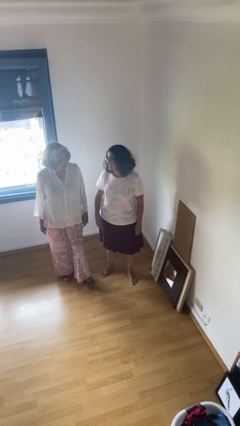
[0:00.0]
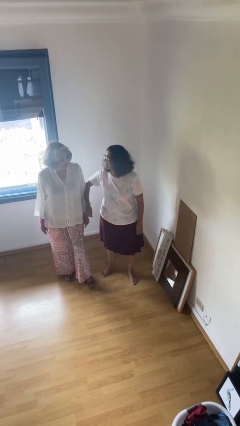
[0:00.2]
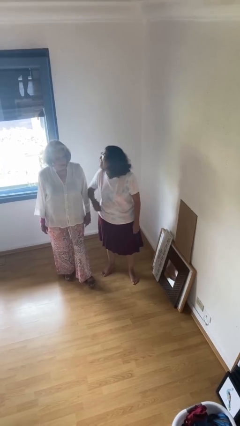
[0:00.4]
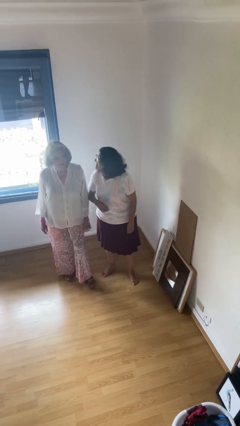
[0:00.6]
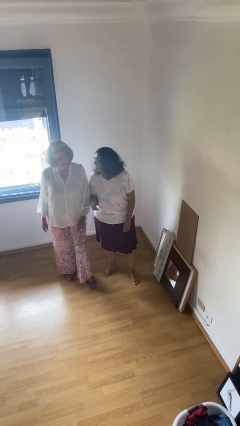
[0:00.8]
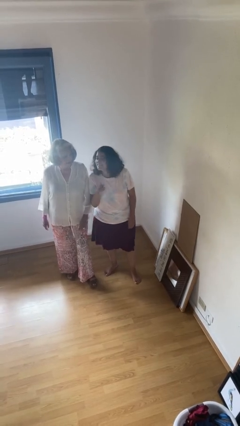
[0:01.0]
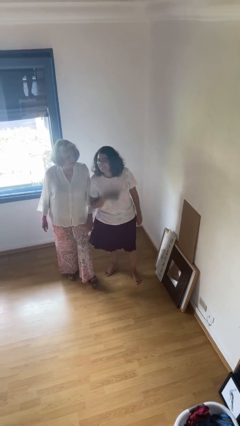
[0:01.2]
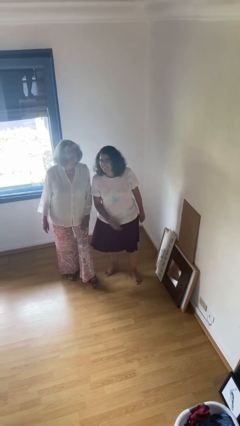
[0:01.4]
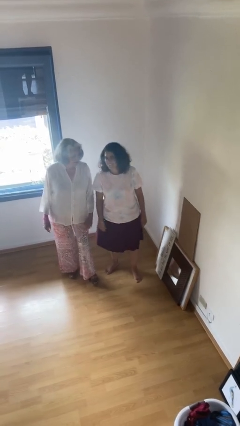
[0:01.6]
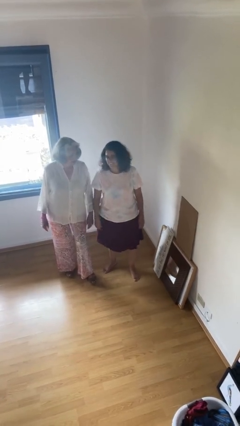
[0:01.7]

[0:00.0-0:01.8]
person nudges person with elbow

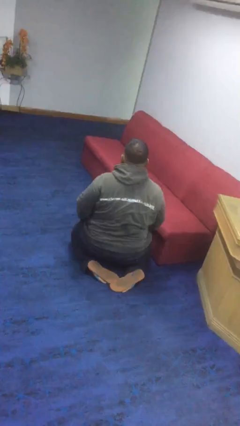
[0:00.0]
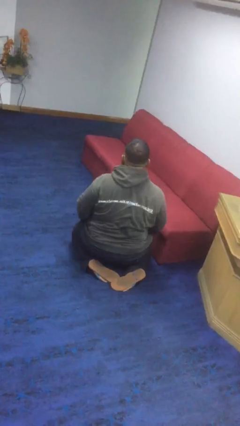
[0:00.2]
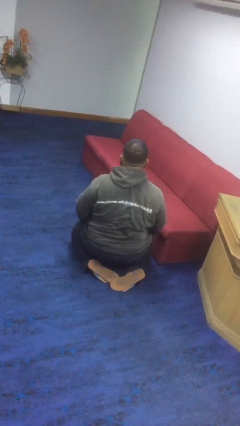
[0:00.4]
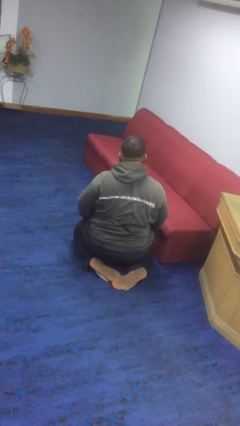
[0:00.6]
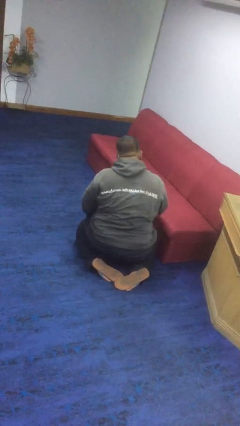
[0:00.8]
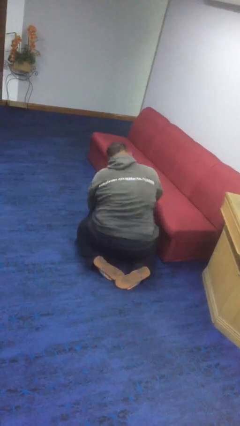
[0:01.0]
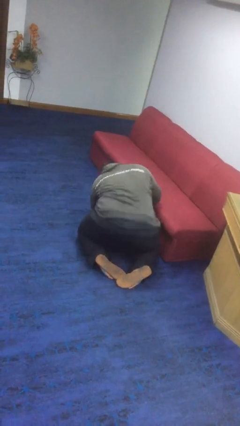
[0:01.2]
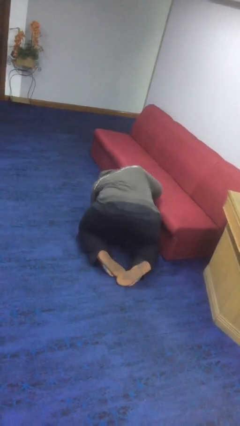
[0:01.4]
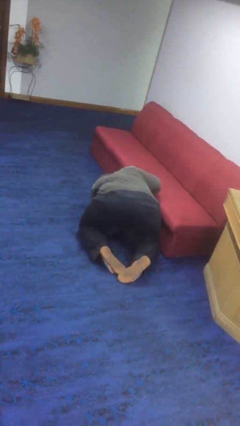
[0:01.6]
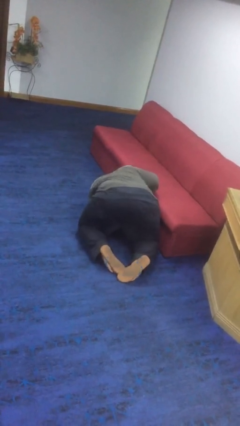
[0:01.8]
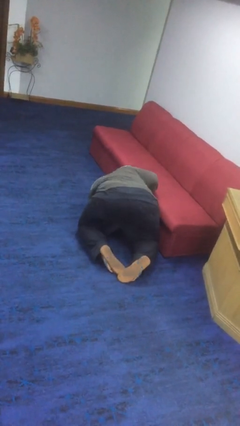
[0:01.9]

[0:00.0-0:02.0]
person searches under couch

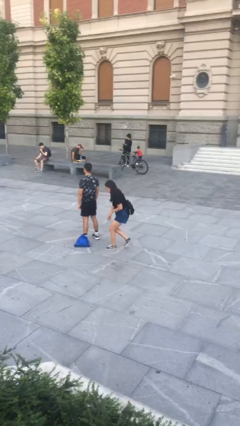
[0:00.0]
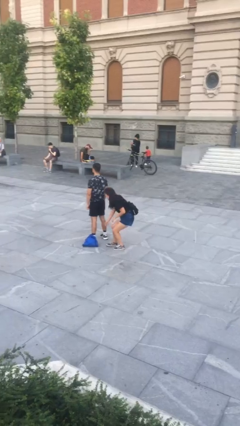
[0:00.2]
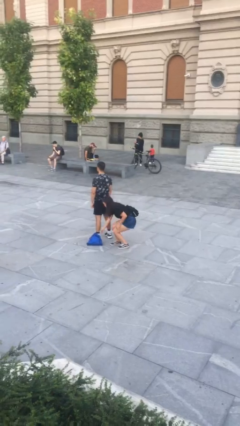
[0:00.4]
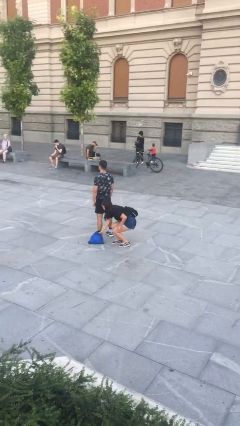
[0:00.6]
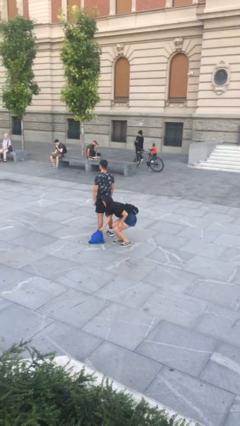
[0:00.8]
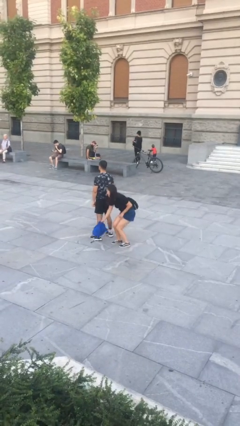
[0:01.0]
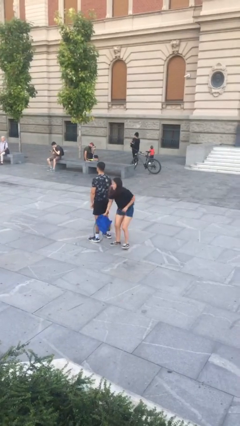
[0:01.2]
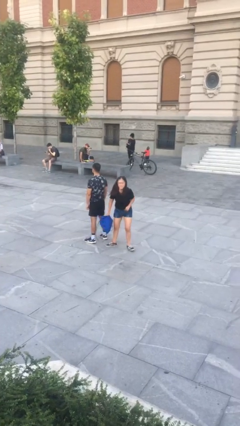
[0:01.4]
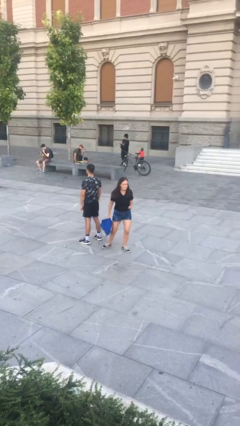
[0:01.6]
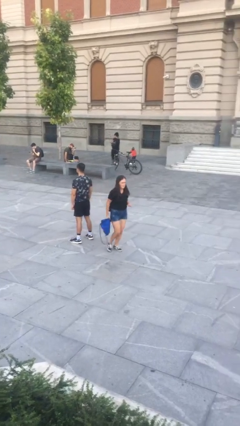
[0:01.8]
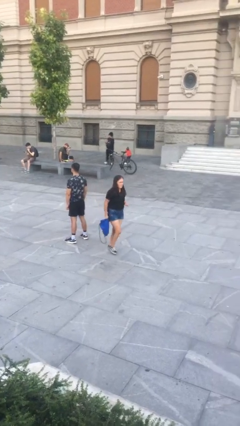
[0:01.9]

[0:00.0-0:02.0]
person steals object from person

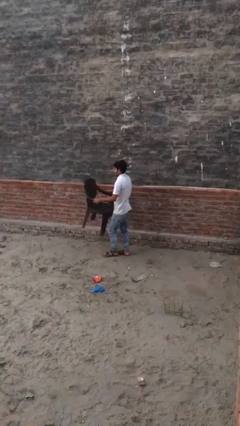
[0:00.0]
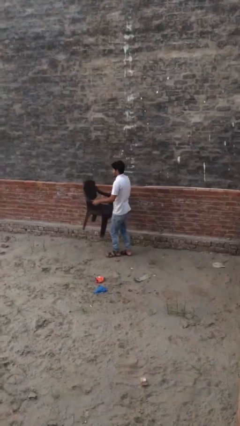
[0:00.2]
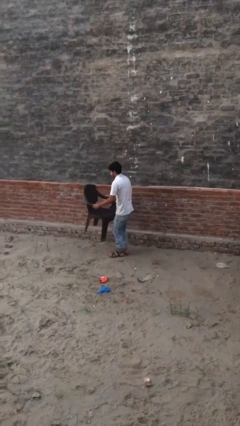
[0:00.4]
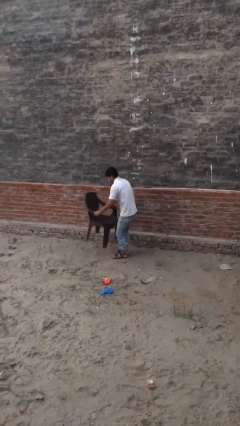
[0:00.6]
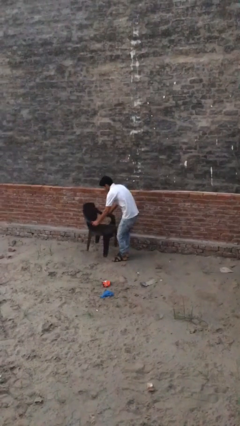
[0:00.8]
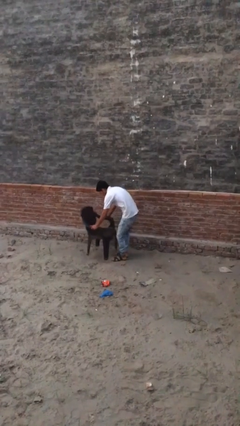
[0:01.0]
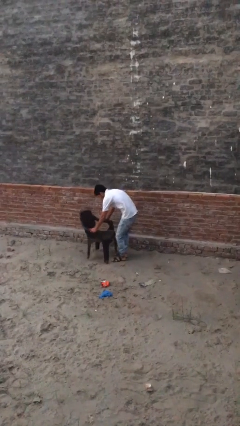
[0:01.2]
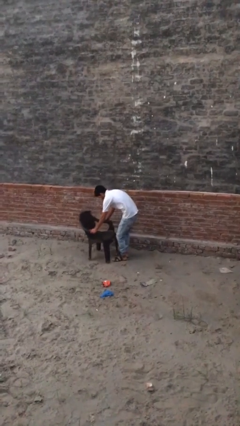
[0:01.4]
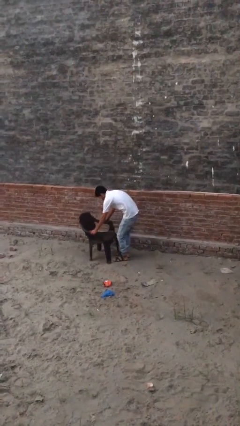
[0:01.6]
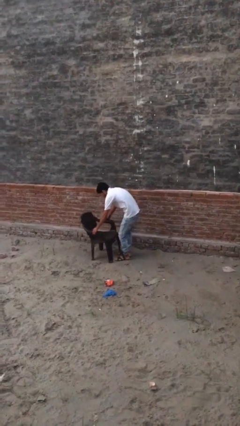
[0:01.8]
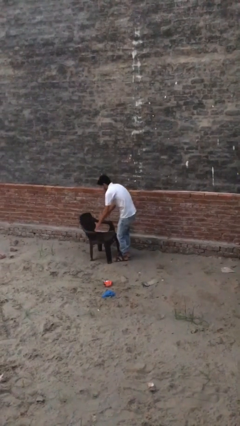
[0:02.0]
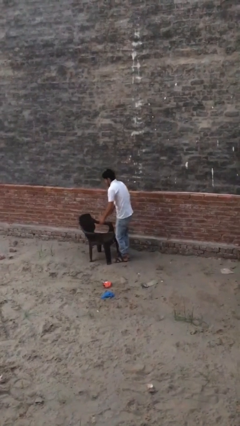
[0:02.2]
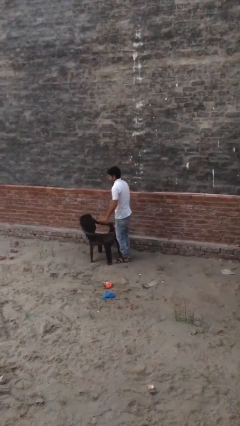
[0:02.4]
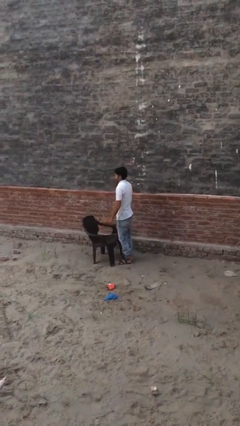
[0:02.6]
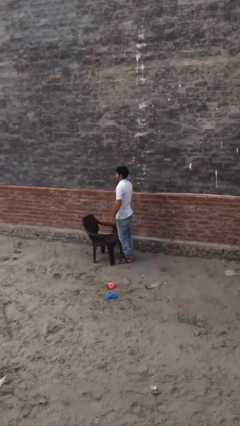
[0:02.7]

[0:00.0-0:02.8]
person puts down object on floor

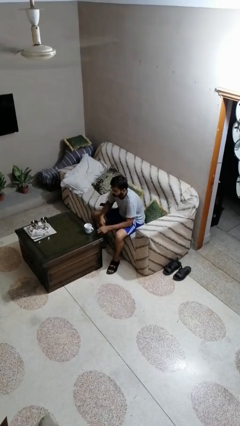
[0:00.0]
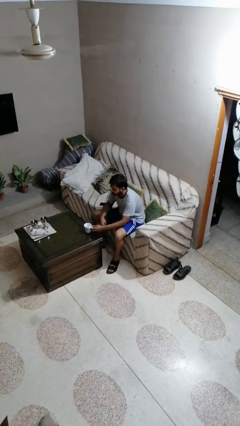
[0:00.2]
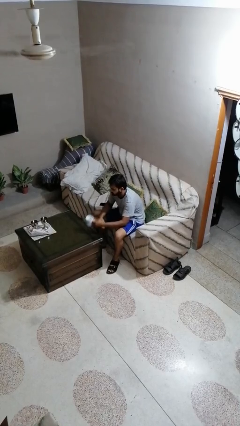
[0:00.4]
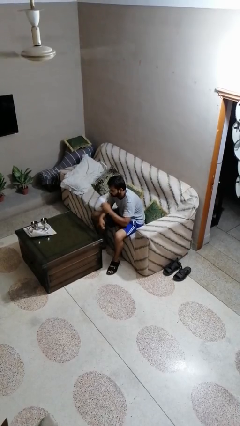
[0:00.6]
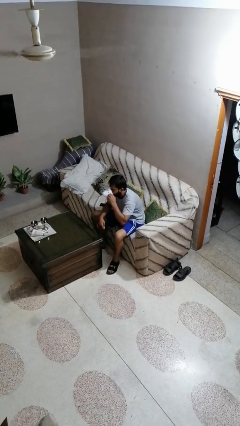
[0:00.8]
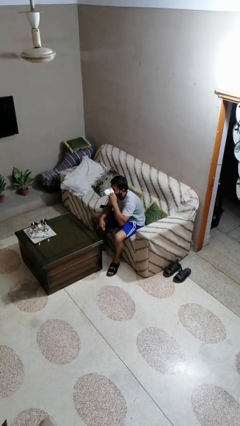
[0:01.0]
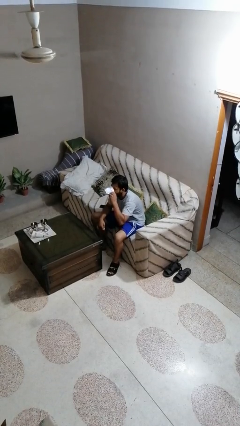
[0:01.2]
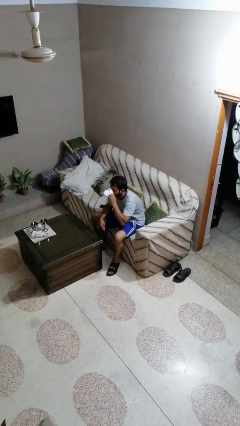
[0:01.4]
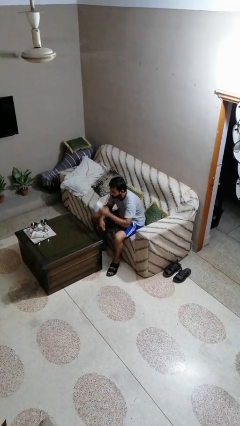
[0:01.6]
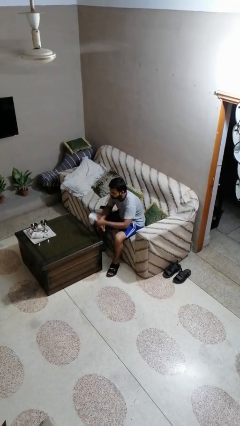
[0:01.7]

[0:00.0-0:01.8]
person drinks from mug

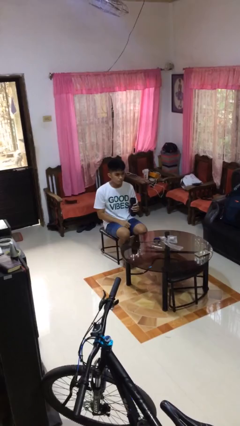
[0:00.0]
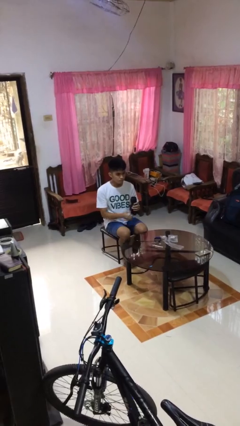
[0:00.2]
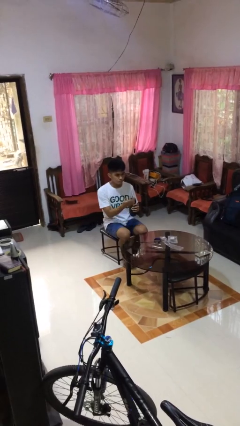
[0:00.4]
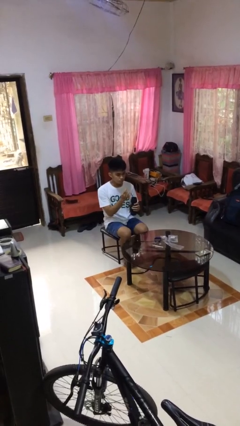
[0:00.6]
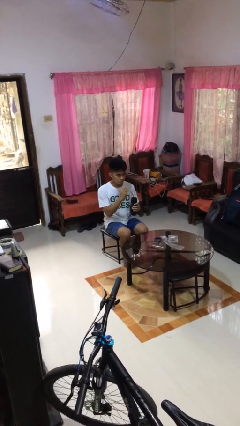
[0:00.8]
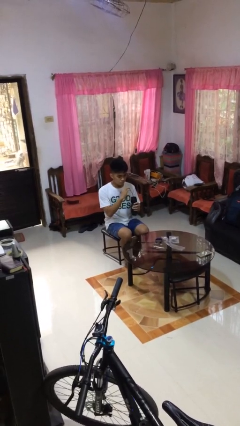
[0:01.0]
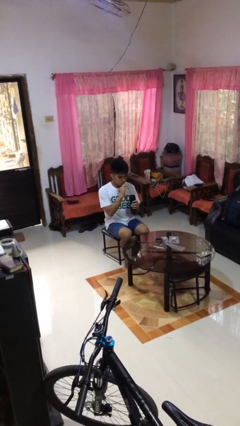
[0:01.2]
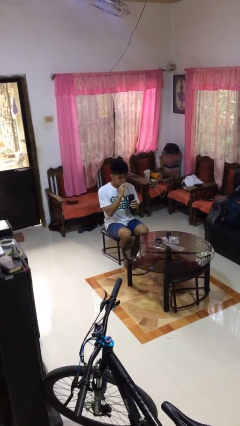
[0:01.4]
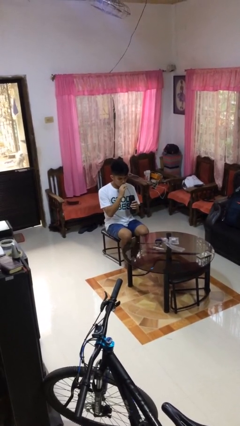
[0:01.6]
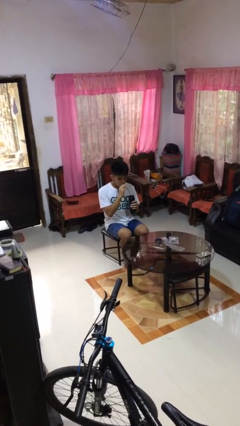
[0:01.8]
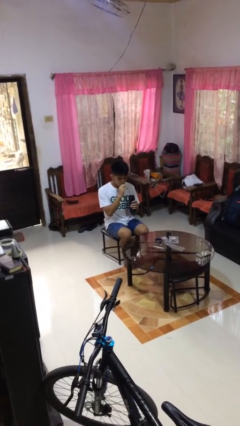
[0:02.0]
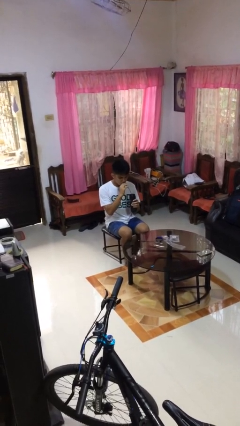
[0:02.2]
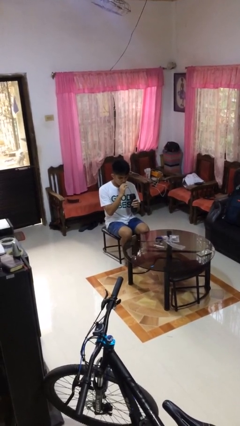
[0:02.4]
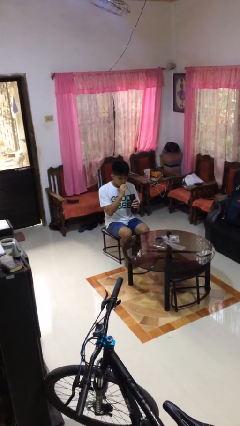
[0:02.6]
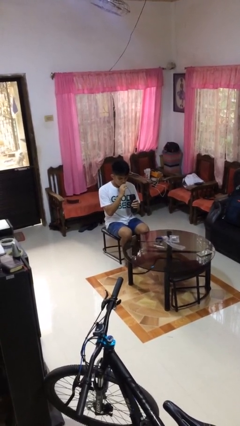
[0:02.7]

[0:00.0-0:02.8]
person drinks from straw

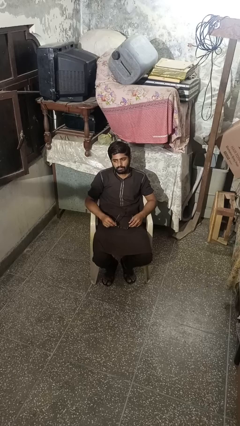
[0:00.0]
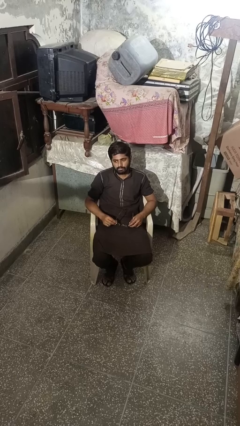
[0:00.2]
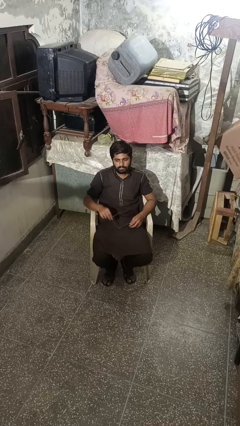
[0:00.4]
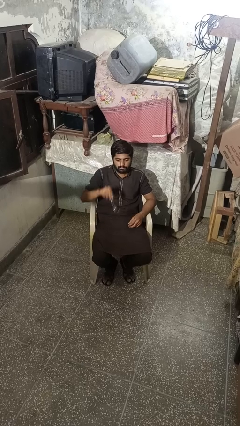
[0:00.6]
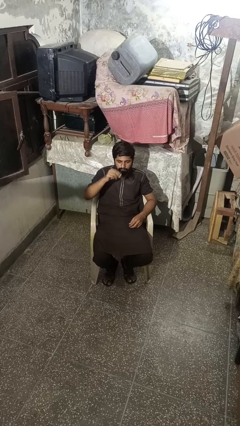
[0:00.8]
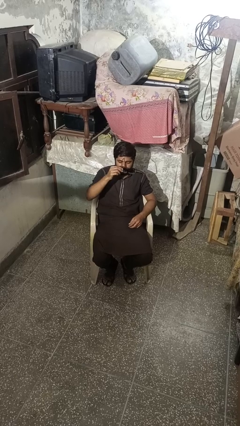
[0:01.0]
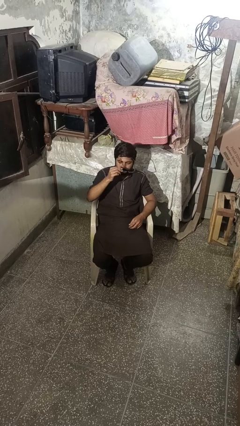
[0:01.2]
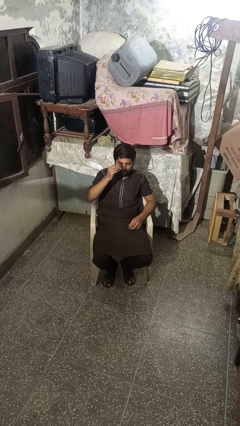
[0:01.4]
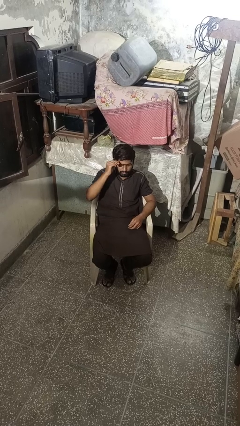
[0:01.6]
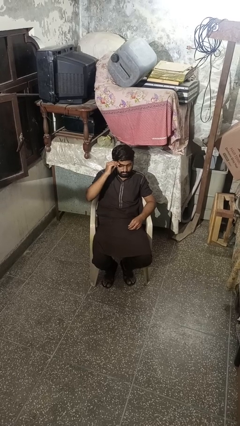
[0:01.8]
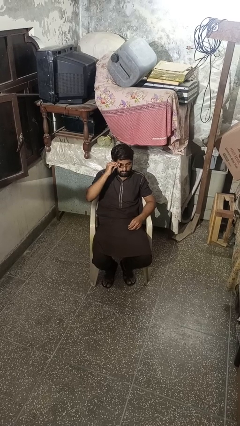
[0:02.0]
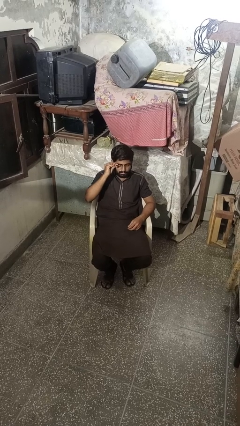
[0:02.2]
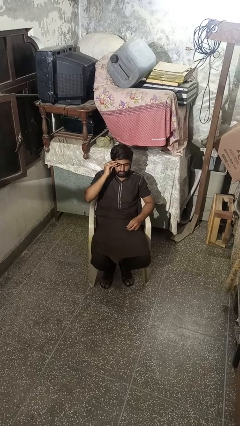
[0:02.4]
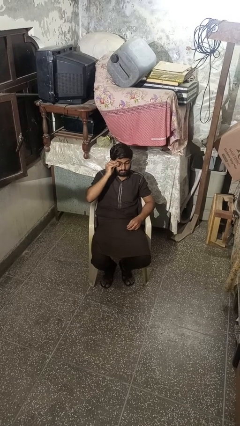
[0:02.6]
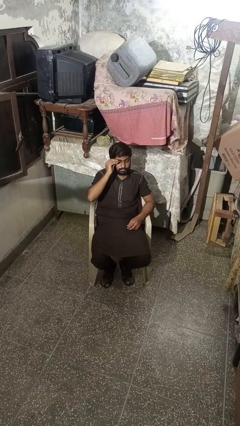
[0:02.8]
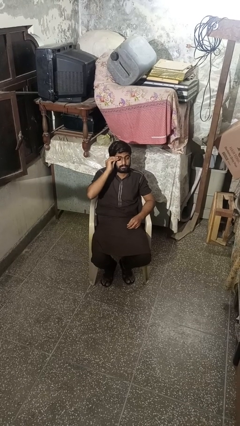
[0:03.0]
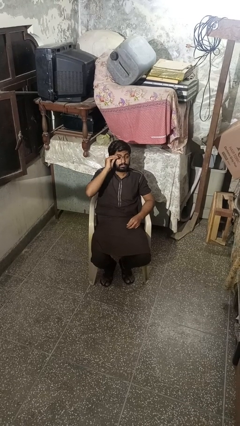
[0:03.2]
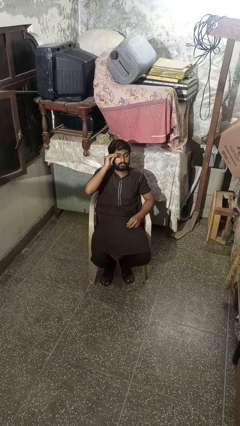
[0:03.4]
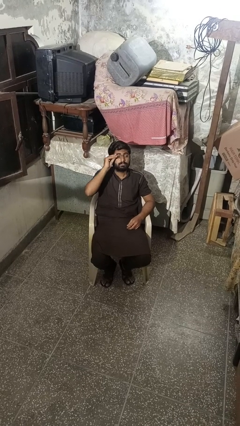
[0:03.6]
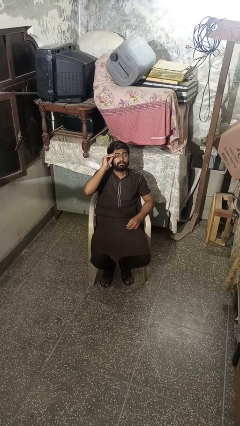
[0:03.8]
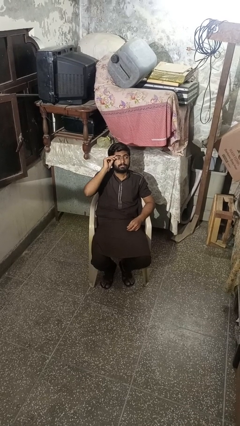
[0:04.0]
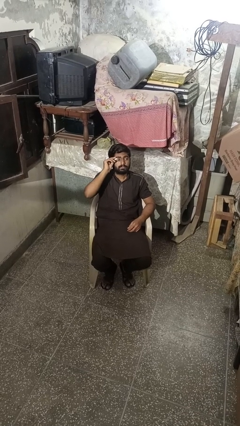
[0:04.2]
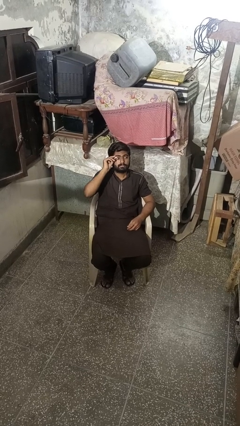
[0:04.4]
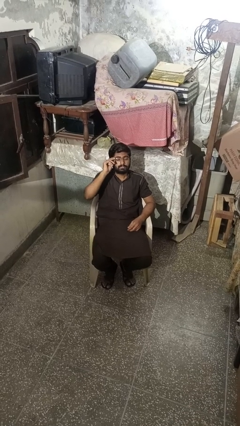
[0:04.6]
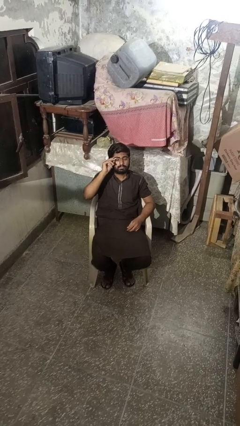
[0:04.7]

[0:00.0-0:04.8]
person puts on glasses
